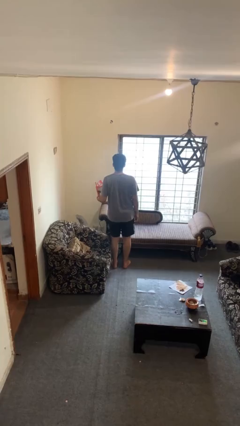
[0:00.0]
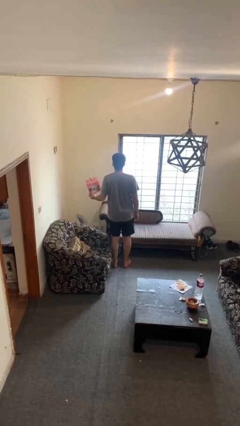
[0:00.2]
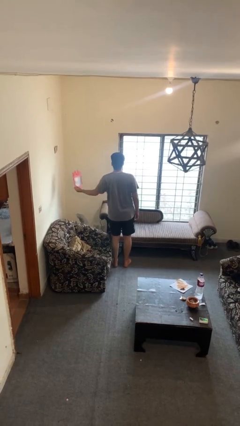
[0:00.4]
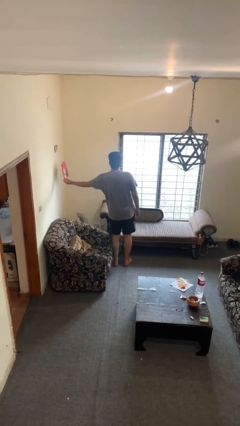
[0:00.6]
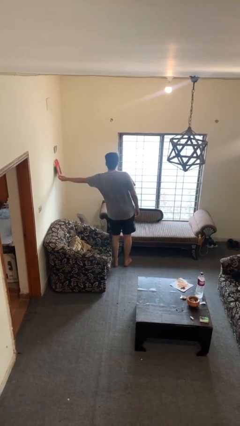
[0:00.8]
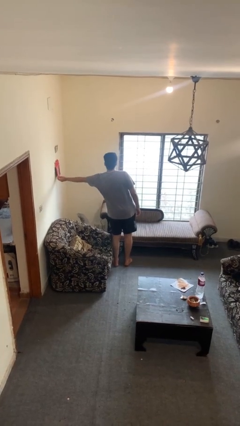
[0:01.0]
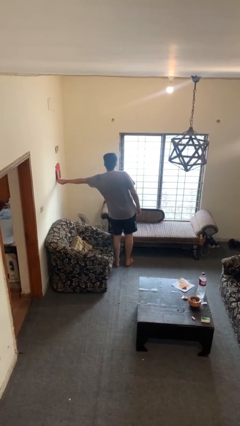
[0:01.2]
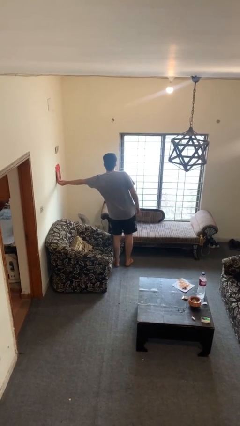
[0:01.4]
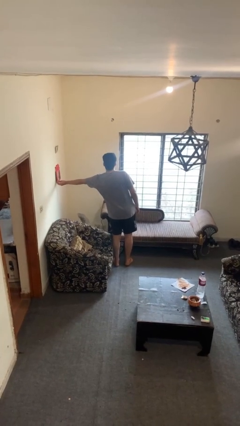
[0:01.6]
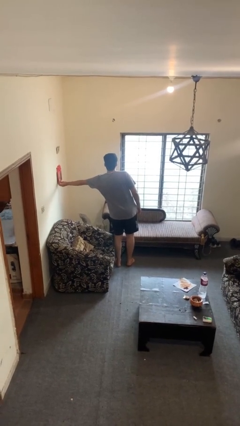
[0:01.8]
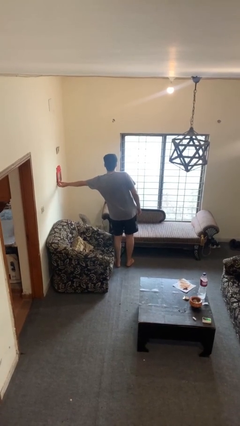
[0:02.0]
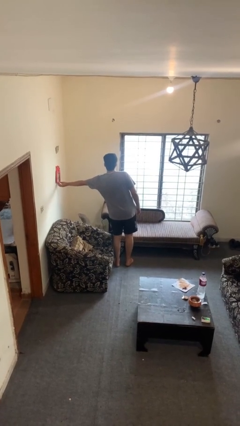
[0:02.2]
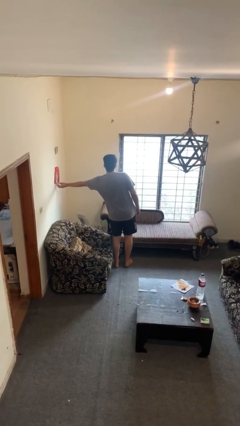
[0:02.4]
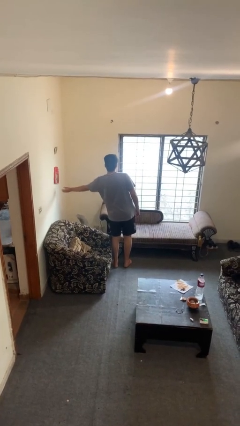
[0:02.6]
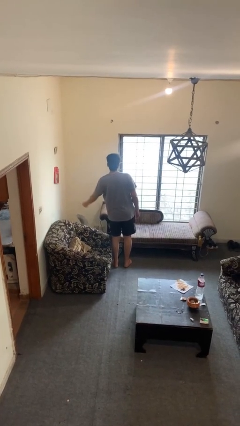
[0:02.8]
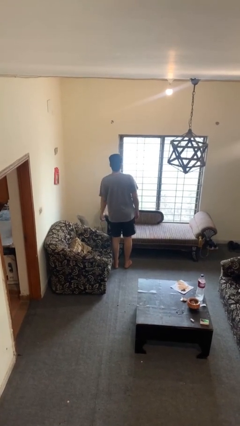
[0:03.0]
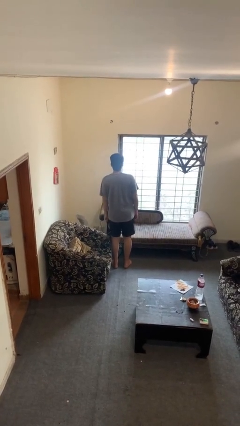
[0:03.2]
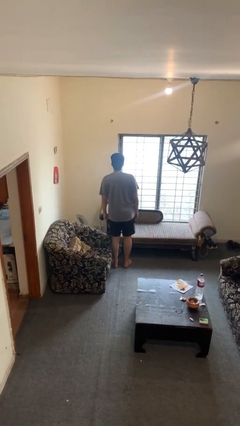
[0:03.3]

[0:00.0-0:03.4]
person puts up picture frame

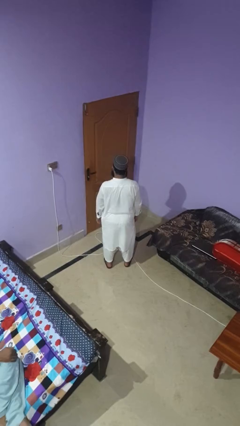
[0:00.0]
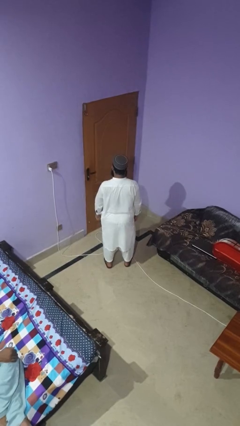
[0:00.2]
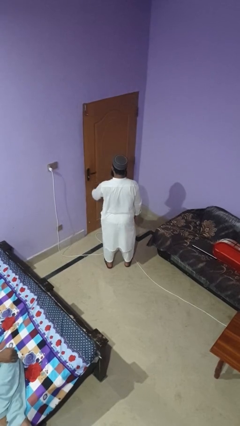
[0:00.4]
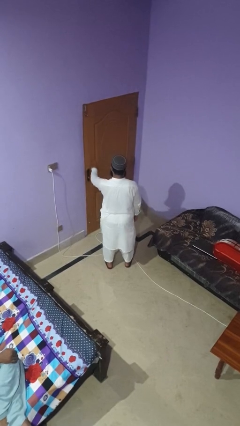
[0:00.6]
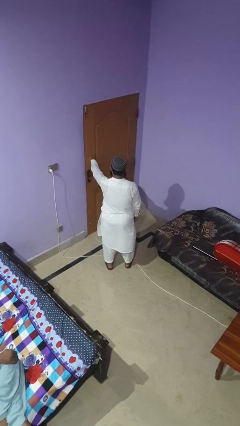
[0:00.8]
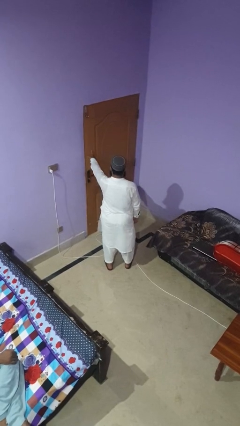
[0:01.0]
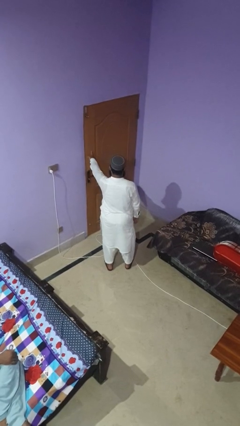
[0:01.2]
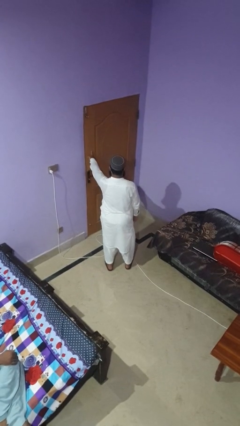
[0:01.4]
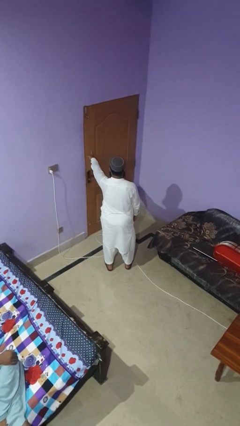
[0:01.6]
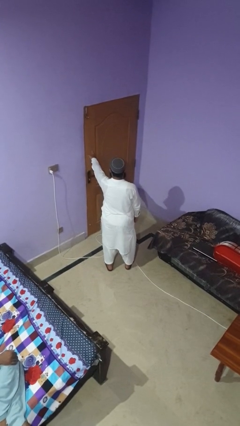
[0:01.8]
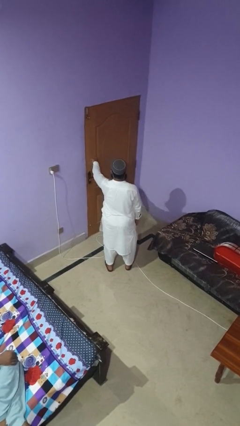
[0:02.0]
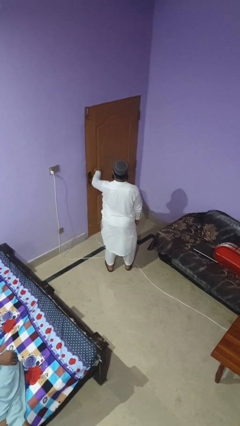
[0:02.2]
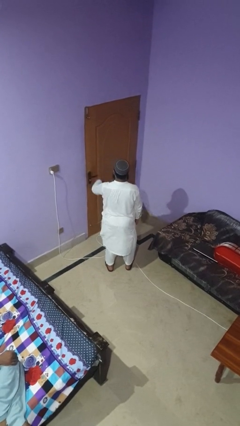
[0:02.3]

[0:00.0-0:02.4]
person taps object with finger

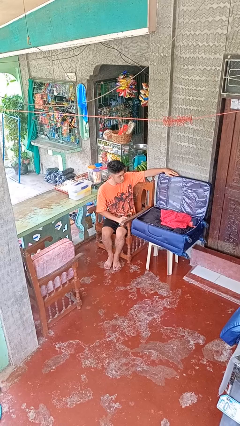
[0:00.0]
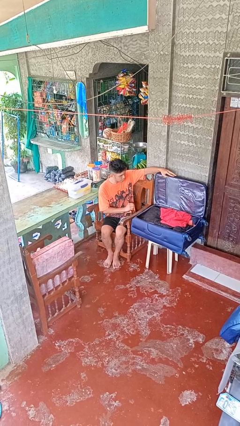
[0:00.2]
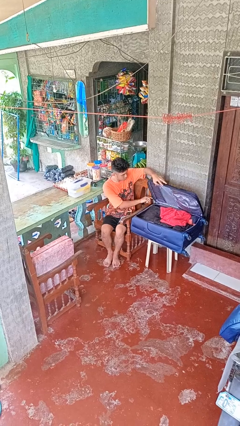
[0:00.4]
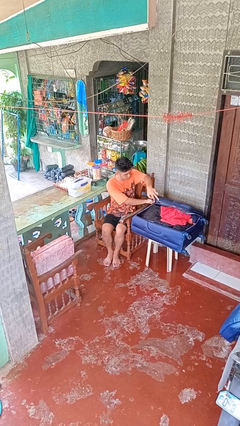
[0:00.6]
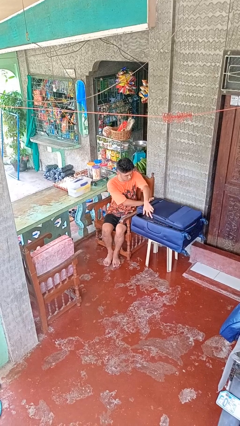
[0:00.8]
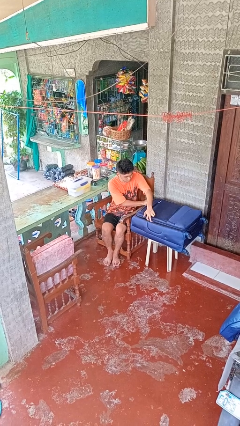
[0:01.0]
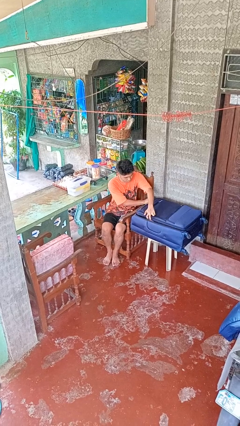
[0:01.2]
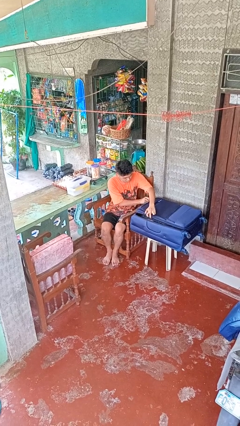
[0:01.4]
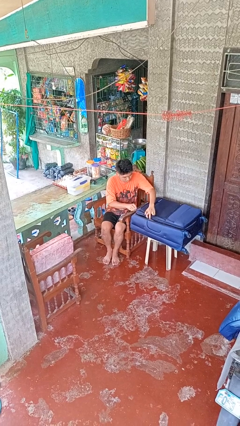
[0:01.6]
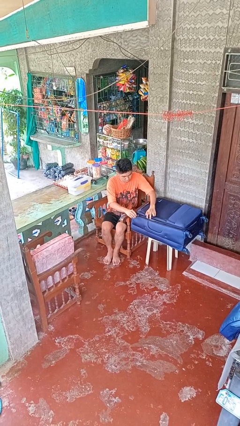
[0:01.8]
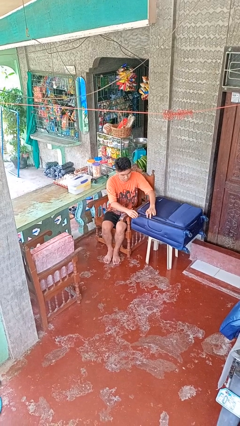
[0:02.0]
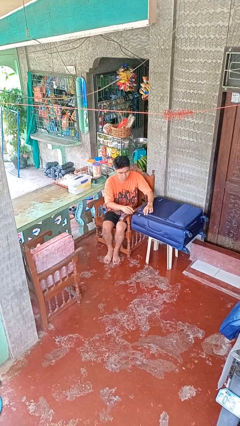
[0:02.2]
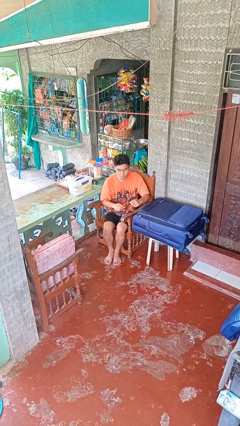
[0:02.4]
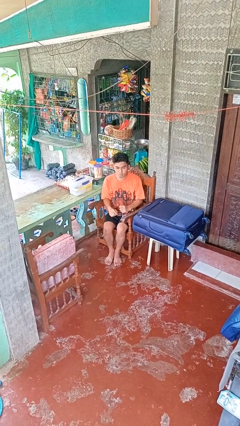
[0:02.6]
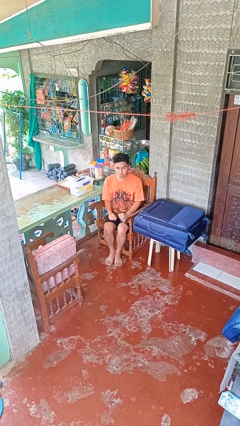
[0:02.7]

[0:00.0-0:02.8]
person closes suitcase

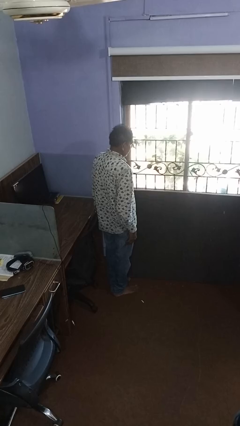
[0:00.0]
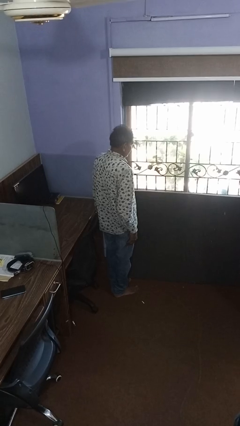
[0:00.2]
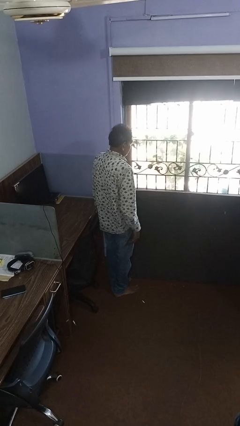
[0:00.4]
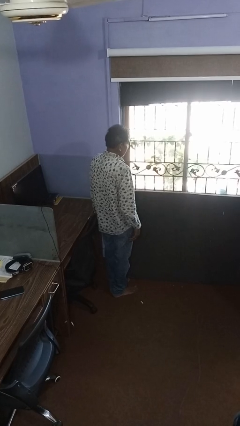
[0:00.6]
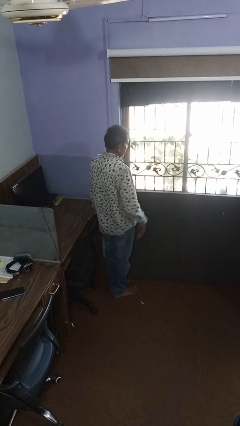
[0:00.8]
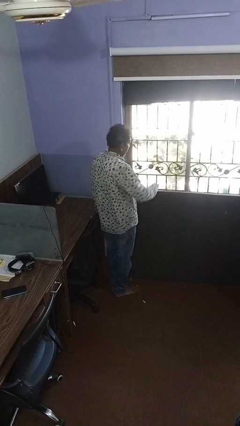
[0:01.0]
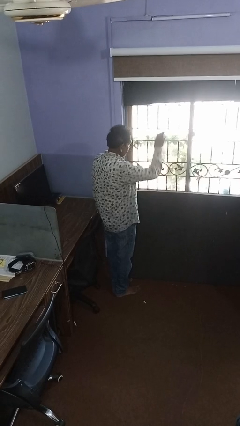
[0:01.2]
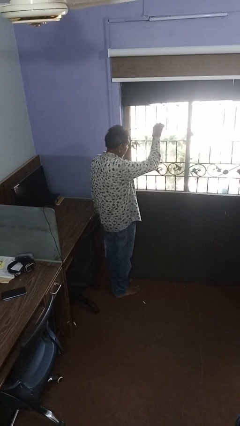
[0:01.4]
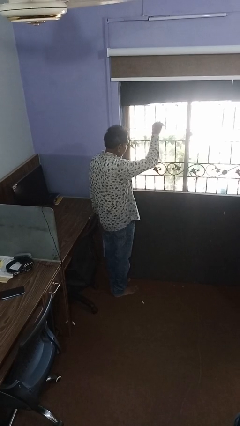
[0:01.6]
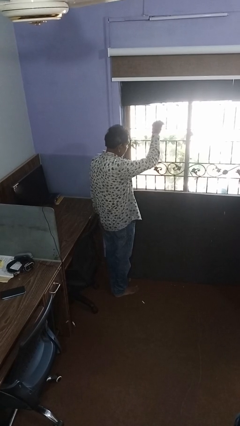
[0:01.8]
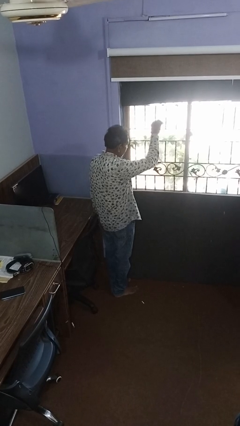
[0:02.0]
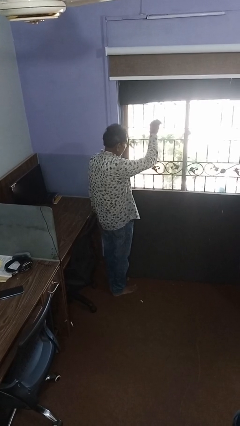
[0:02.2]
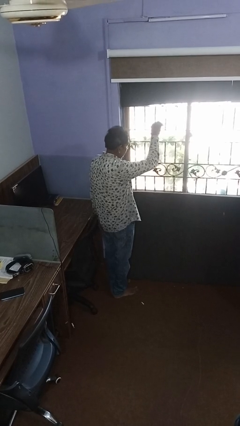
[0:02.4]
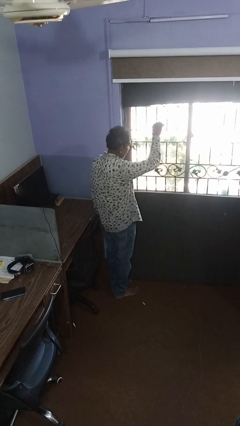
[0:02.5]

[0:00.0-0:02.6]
person gestures come here

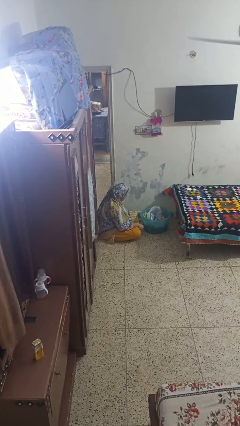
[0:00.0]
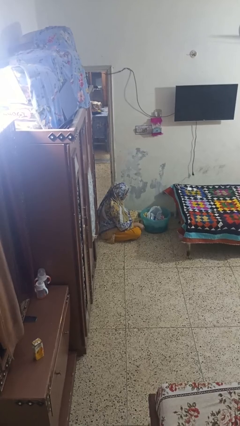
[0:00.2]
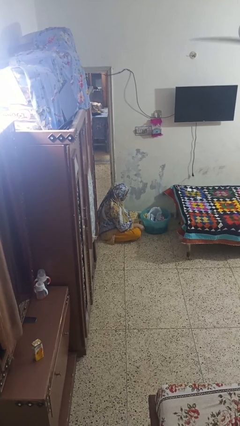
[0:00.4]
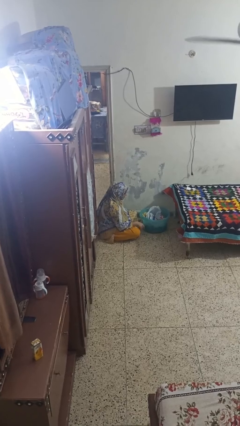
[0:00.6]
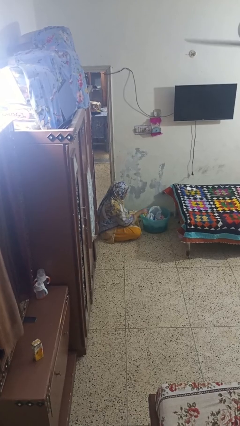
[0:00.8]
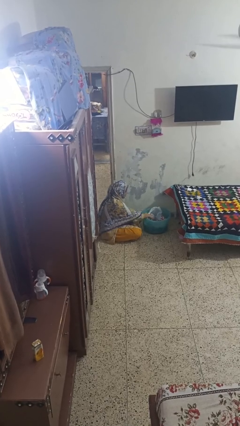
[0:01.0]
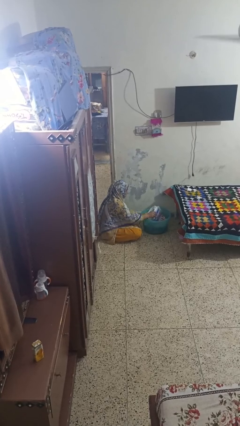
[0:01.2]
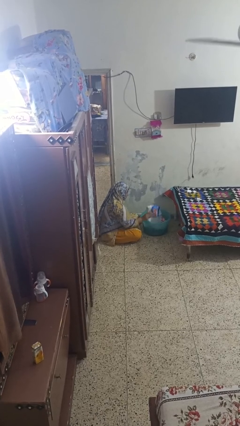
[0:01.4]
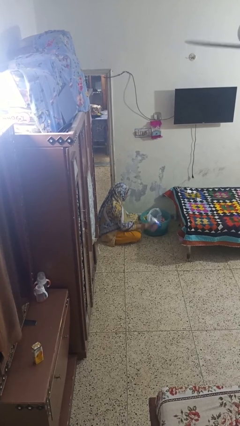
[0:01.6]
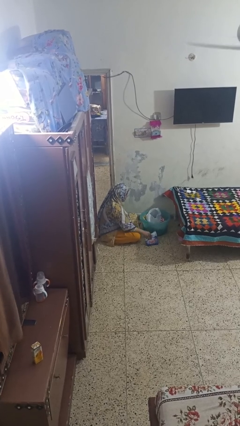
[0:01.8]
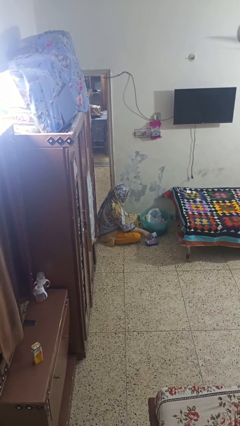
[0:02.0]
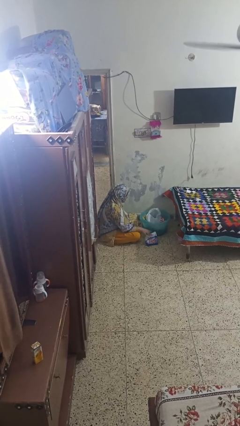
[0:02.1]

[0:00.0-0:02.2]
person takes object from basket

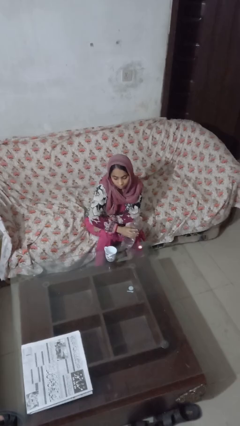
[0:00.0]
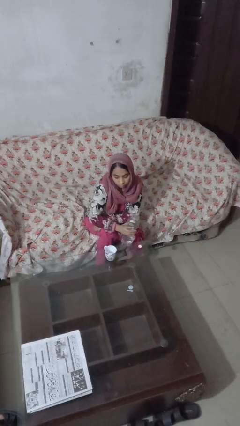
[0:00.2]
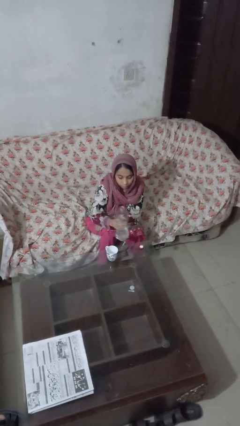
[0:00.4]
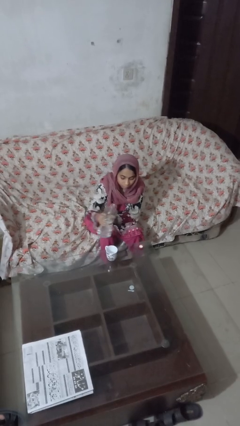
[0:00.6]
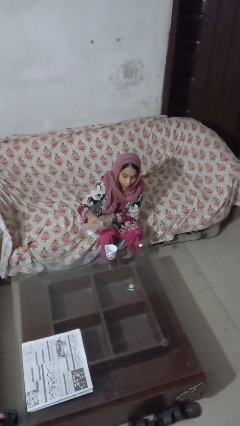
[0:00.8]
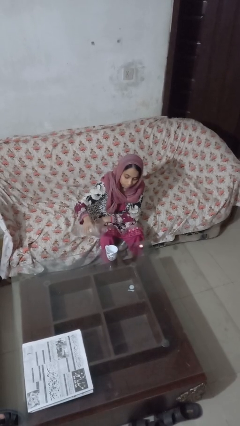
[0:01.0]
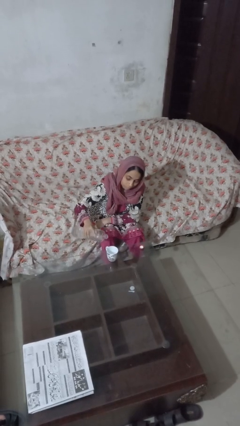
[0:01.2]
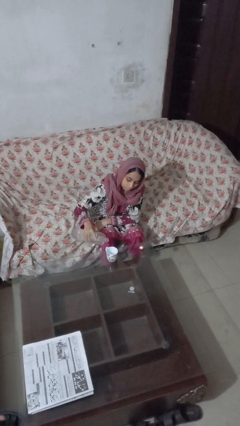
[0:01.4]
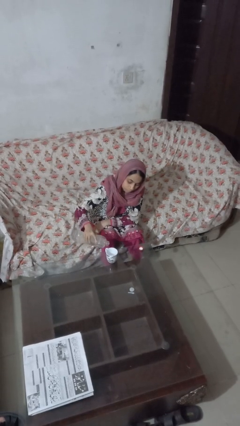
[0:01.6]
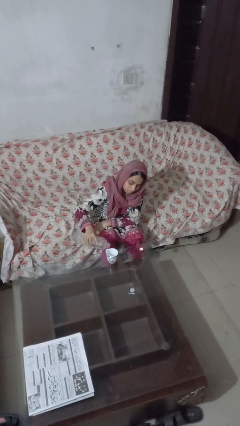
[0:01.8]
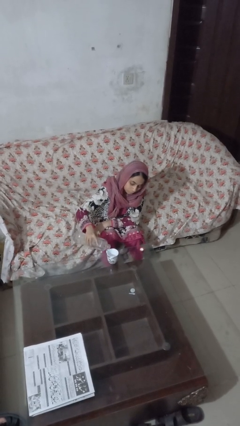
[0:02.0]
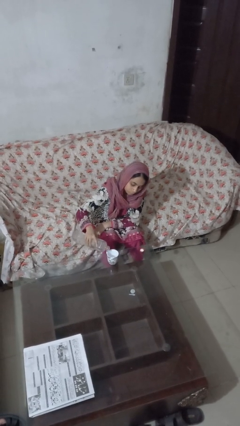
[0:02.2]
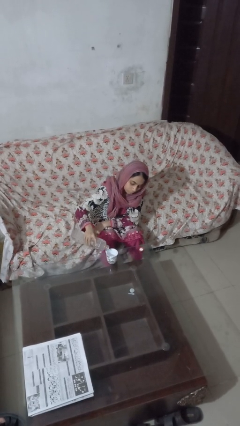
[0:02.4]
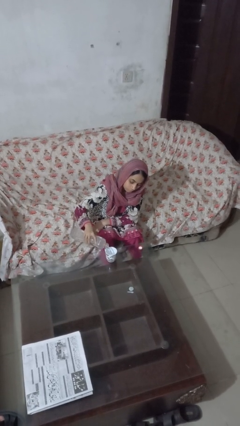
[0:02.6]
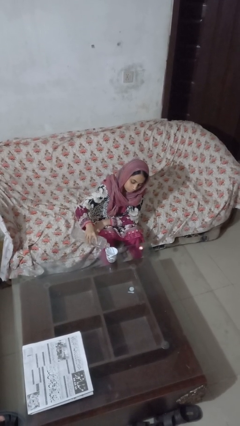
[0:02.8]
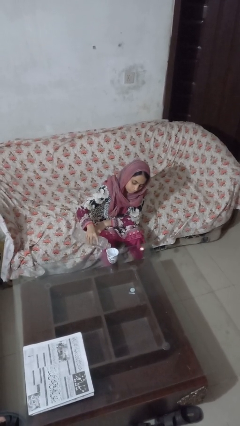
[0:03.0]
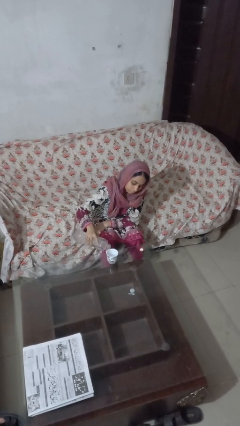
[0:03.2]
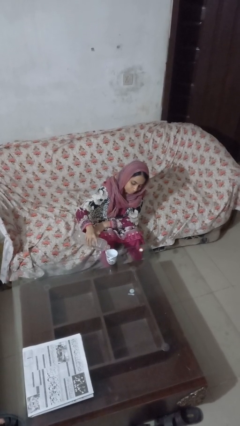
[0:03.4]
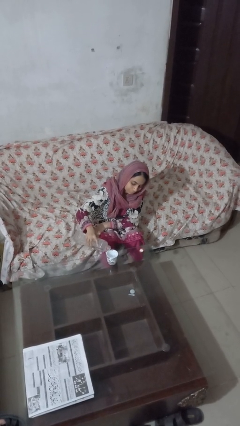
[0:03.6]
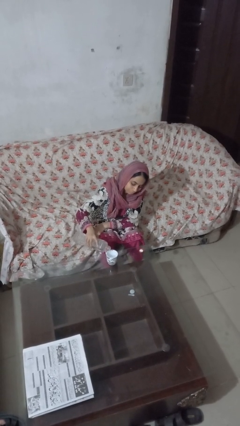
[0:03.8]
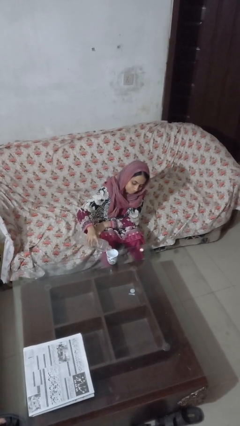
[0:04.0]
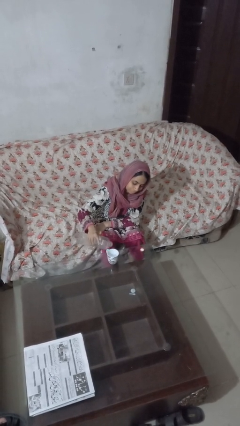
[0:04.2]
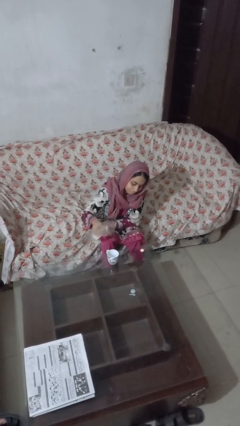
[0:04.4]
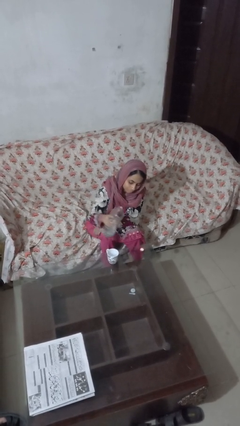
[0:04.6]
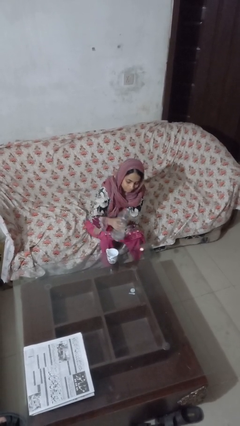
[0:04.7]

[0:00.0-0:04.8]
person pours liquid into cup
